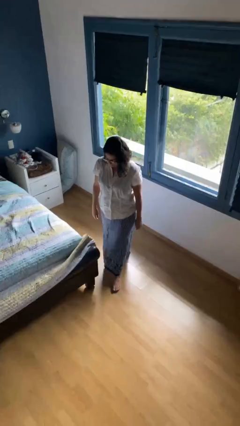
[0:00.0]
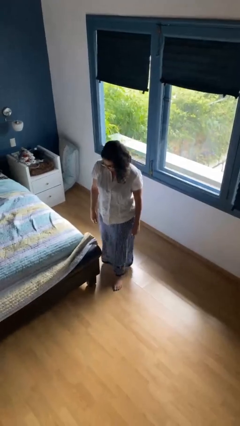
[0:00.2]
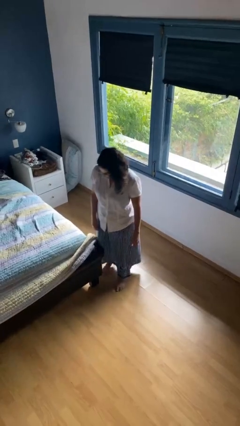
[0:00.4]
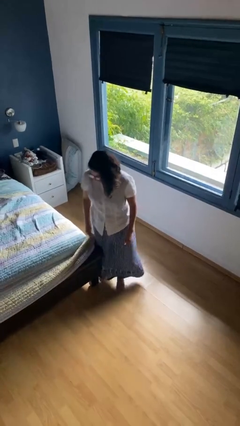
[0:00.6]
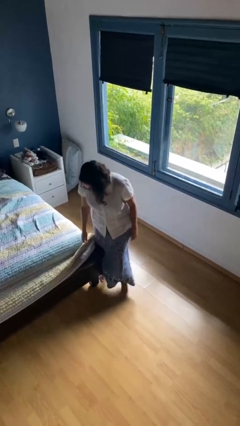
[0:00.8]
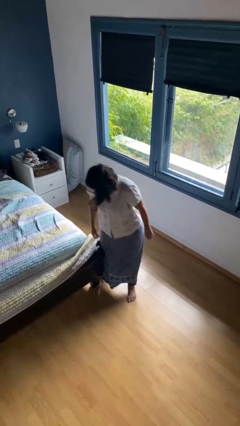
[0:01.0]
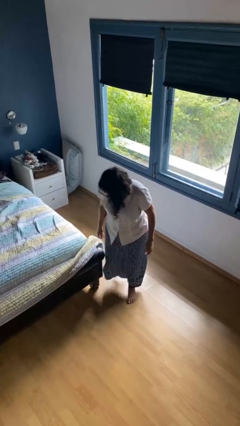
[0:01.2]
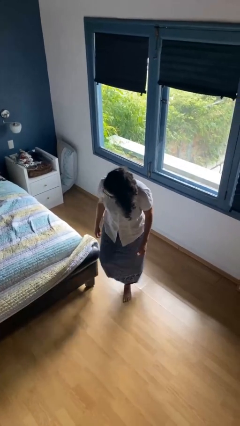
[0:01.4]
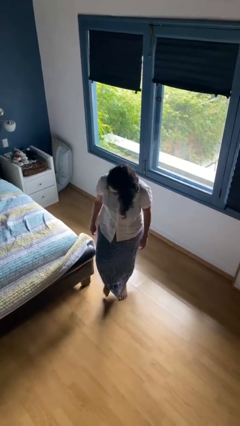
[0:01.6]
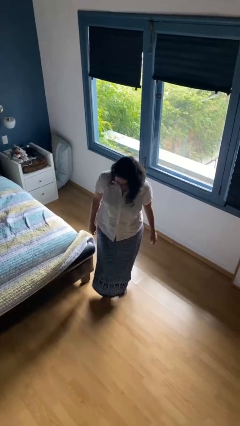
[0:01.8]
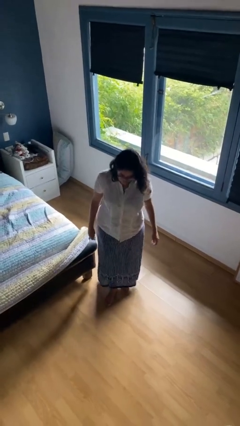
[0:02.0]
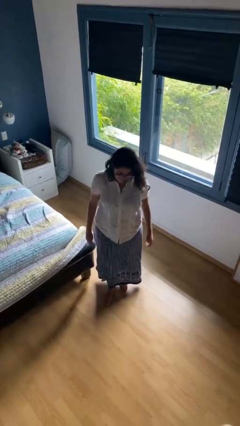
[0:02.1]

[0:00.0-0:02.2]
person stubs toe

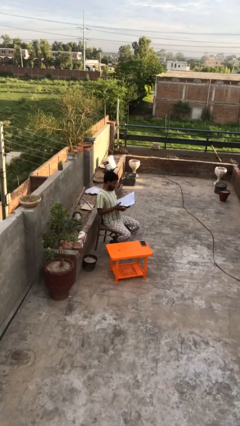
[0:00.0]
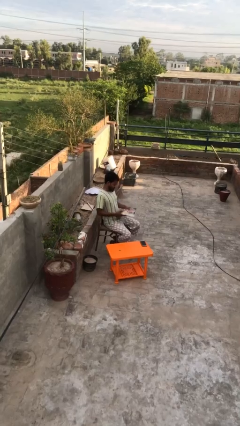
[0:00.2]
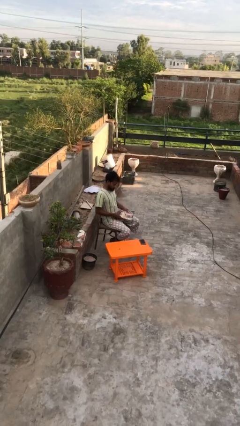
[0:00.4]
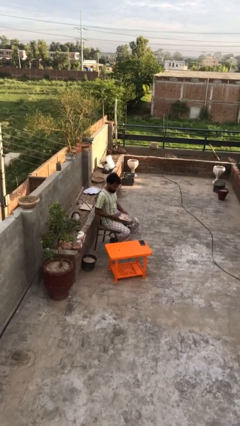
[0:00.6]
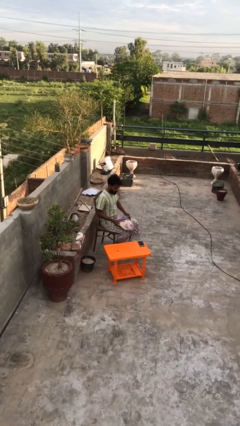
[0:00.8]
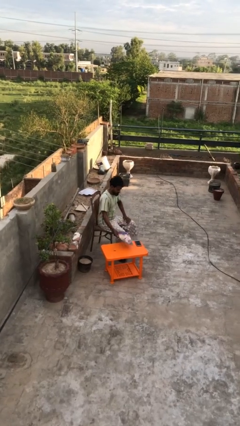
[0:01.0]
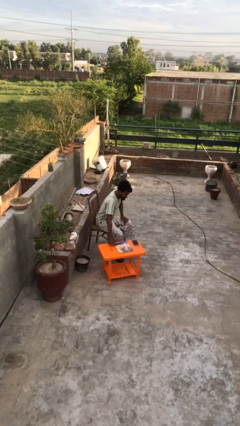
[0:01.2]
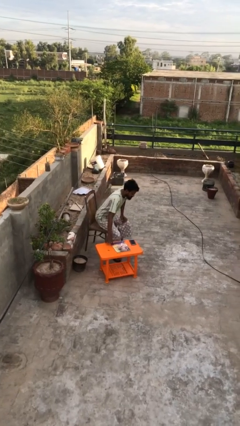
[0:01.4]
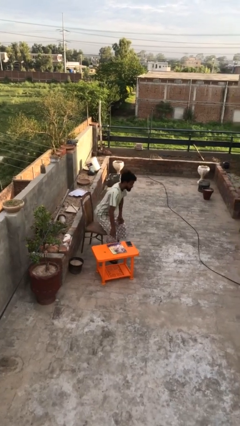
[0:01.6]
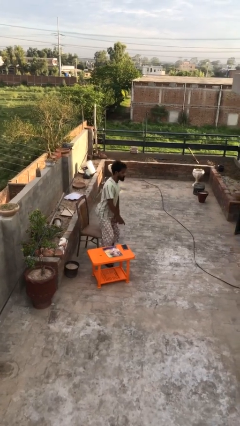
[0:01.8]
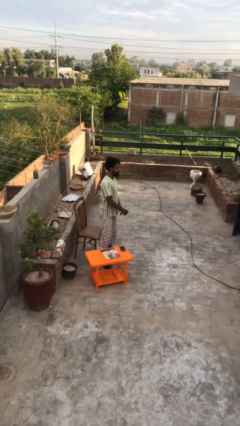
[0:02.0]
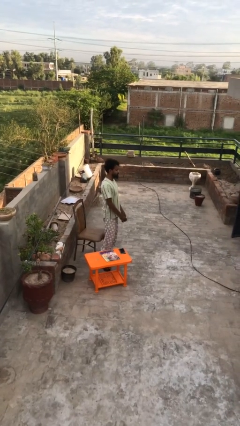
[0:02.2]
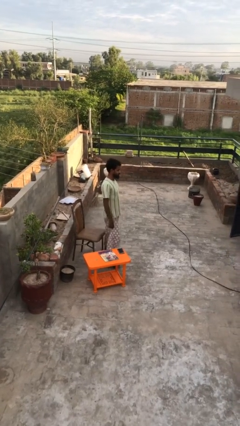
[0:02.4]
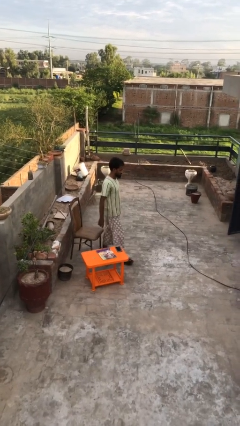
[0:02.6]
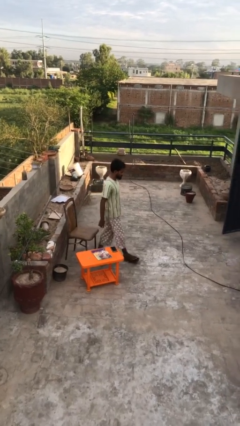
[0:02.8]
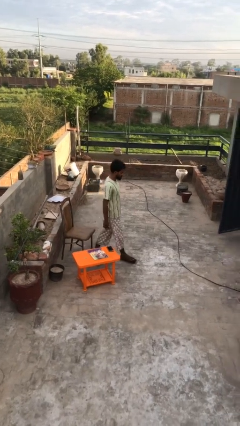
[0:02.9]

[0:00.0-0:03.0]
person stands up

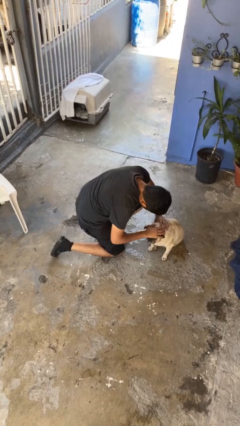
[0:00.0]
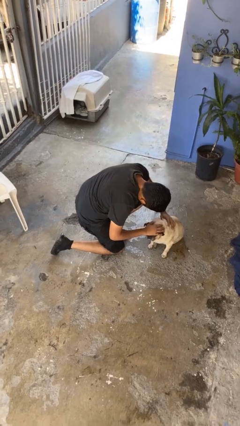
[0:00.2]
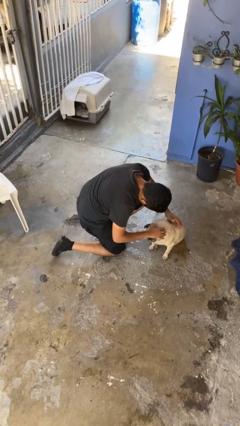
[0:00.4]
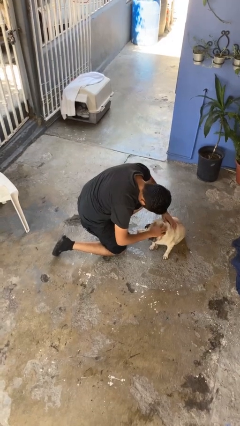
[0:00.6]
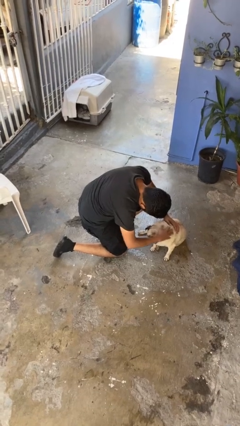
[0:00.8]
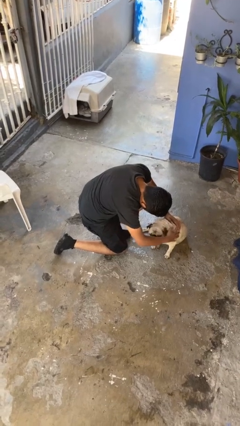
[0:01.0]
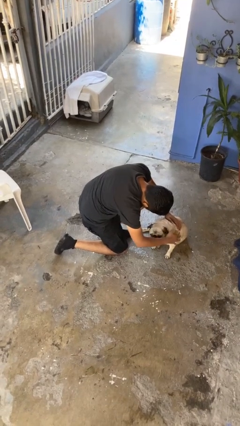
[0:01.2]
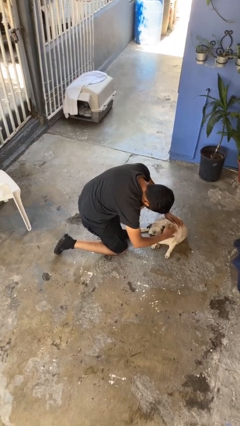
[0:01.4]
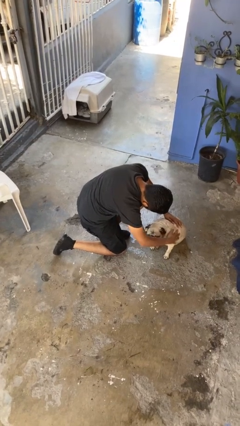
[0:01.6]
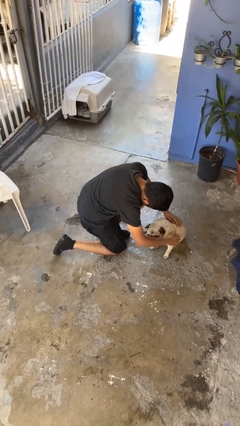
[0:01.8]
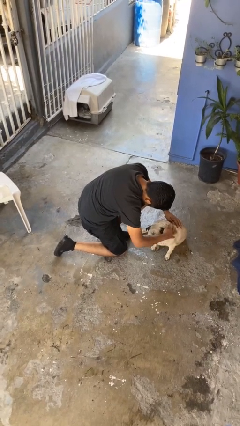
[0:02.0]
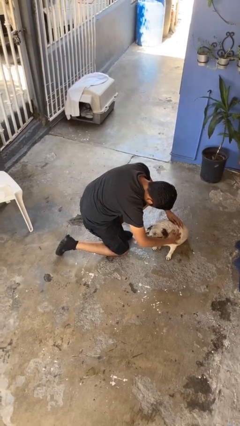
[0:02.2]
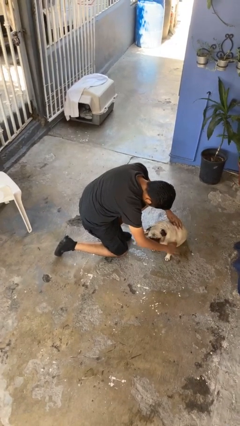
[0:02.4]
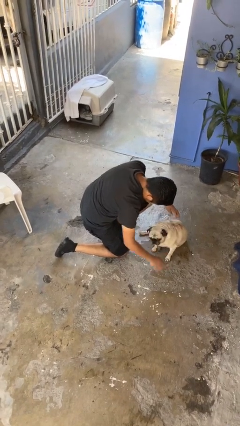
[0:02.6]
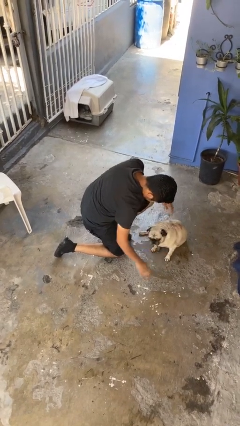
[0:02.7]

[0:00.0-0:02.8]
person pets dog

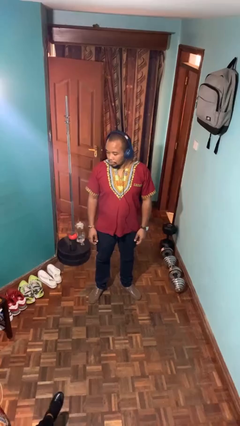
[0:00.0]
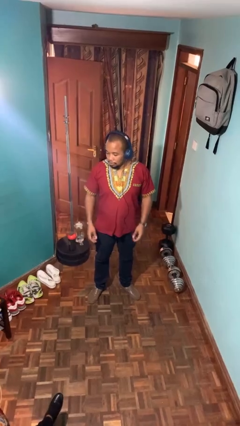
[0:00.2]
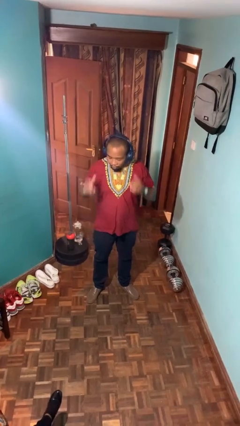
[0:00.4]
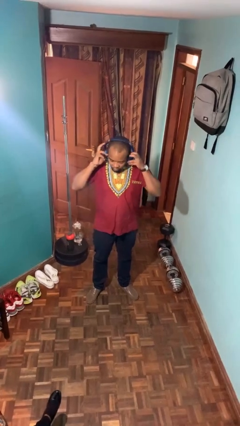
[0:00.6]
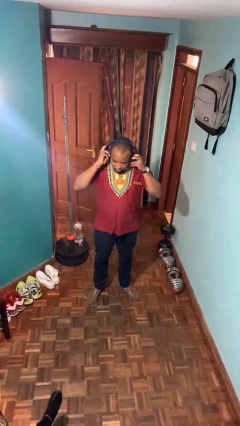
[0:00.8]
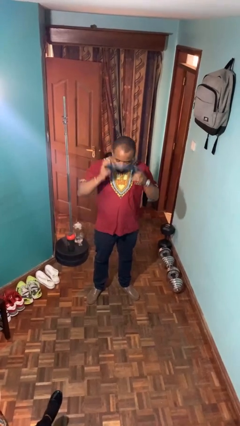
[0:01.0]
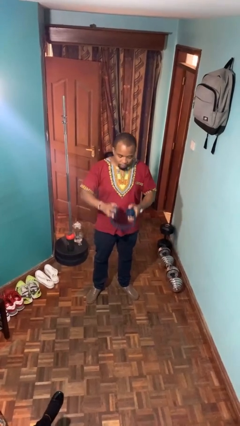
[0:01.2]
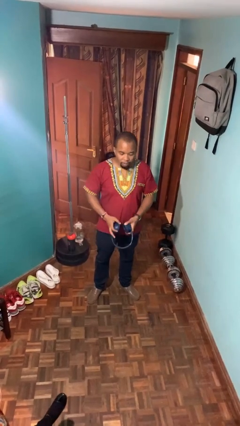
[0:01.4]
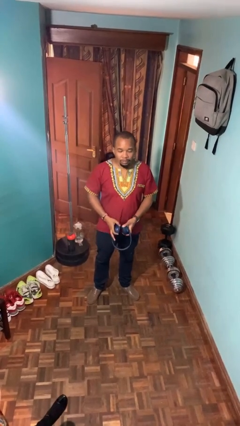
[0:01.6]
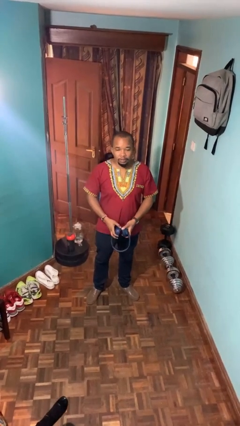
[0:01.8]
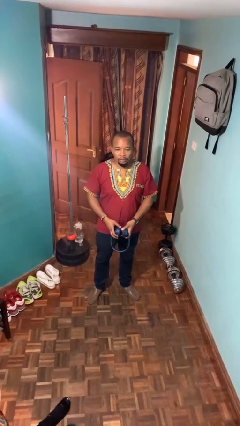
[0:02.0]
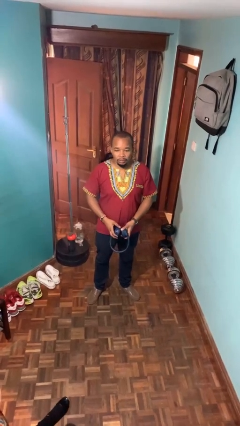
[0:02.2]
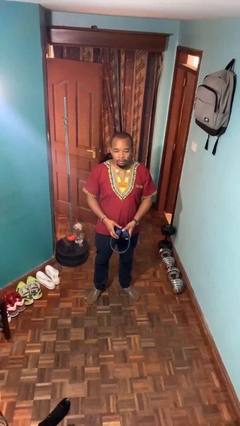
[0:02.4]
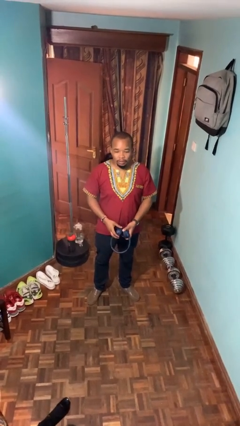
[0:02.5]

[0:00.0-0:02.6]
person takes off headphones

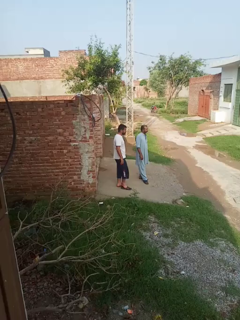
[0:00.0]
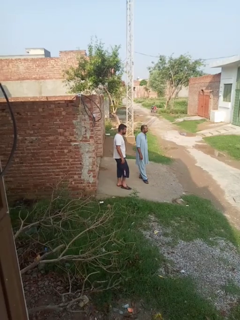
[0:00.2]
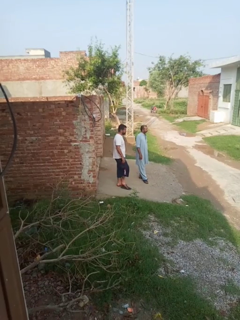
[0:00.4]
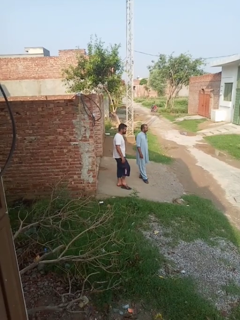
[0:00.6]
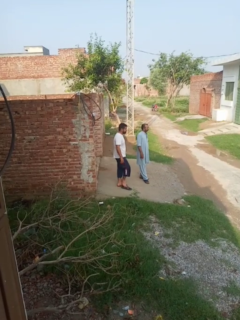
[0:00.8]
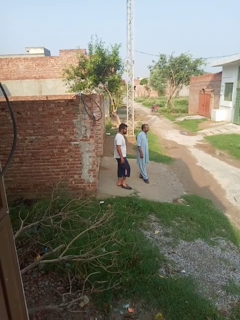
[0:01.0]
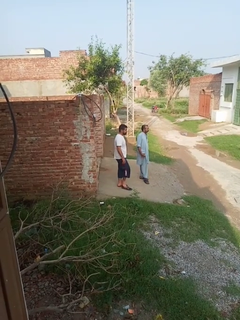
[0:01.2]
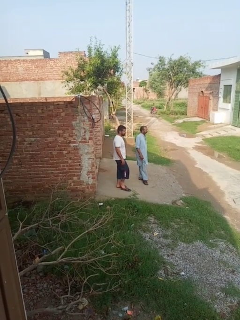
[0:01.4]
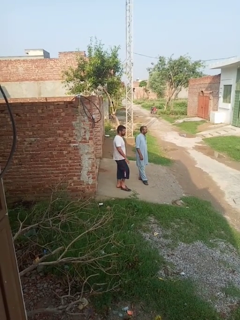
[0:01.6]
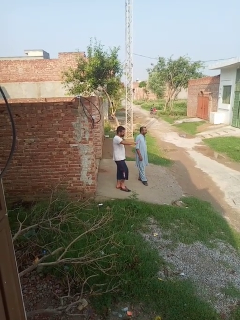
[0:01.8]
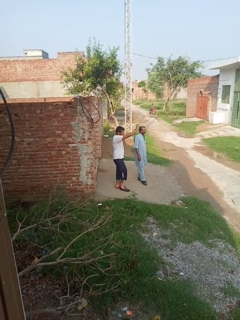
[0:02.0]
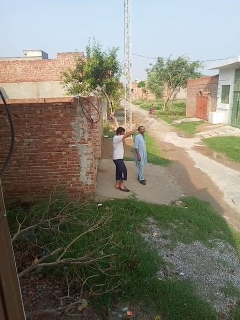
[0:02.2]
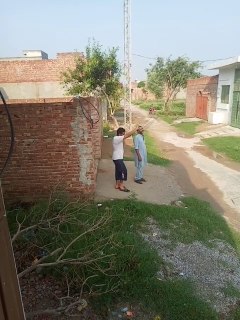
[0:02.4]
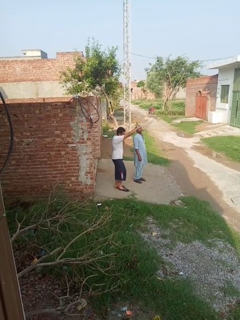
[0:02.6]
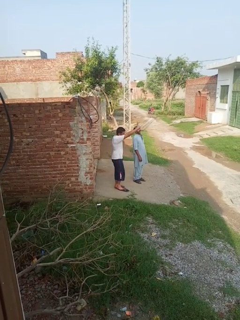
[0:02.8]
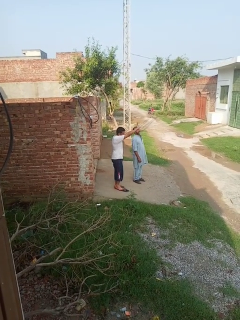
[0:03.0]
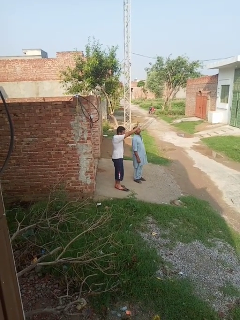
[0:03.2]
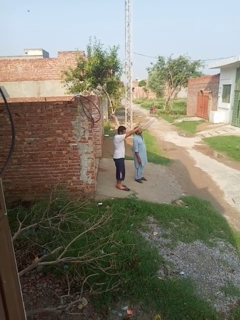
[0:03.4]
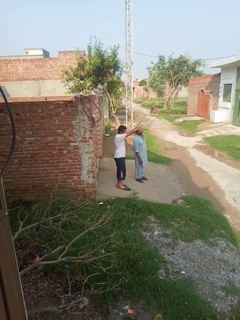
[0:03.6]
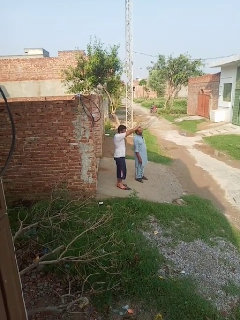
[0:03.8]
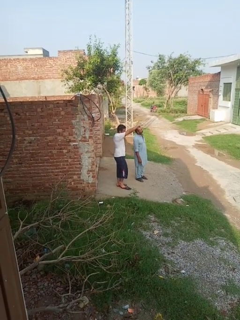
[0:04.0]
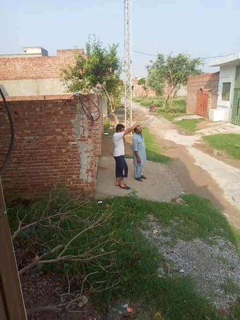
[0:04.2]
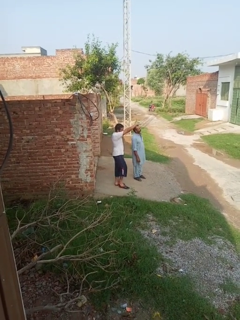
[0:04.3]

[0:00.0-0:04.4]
person waves at person

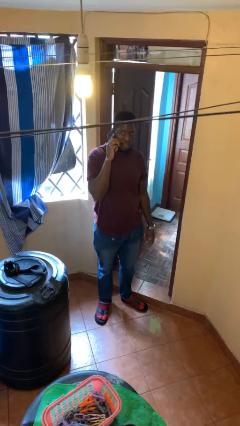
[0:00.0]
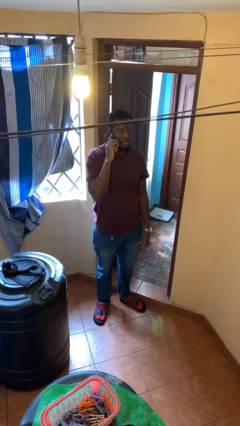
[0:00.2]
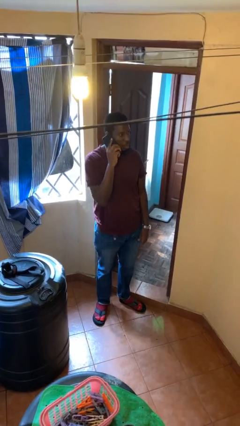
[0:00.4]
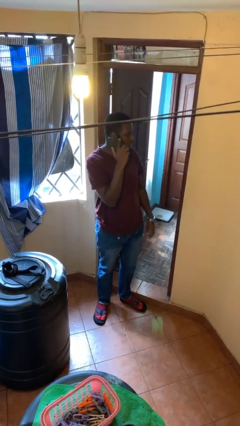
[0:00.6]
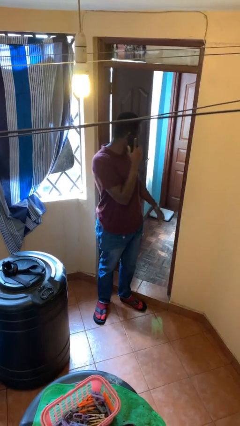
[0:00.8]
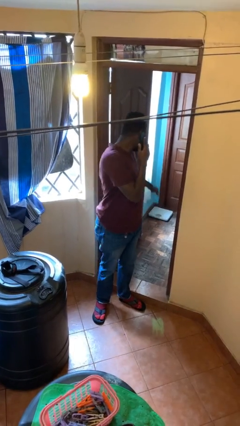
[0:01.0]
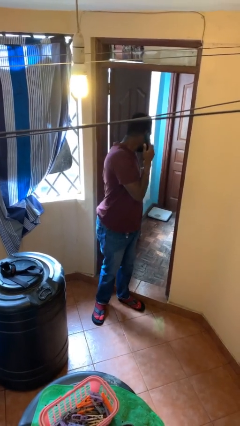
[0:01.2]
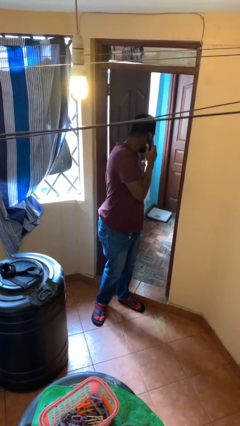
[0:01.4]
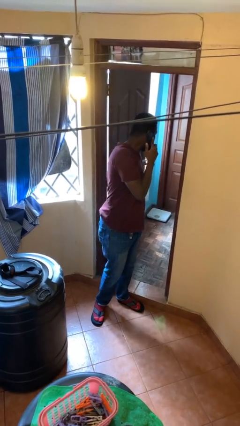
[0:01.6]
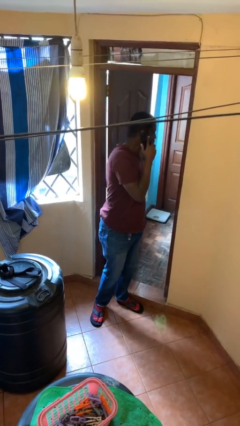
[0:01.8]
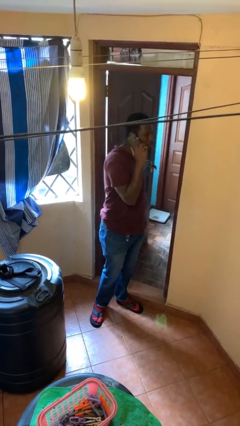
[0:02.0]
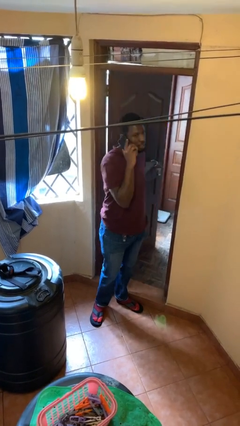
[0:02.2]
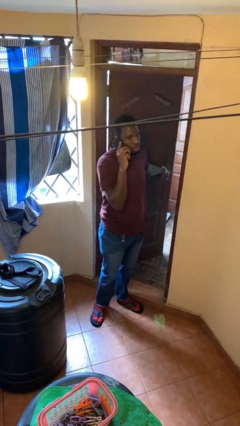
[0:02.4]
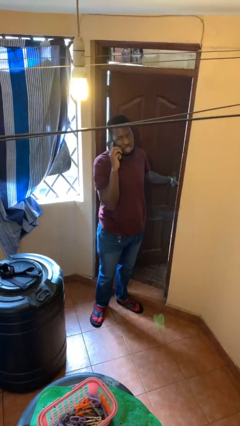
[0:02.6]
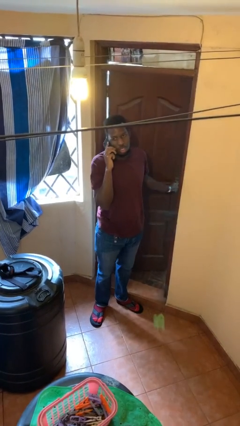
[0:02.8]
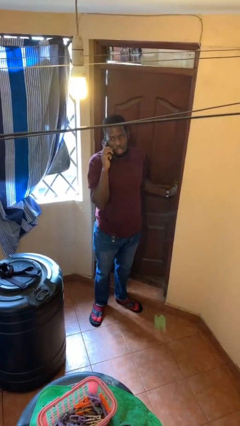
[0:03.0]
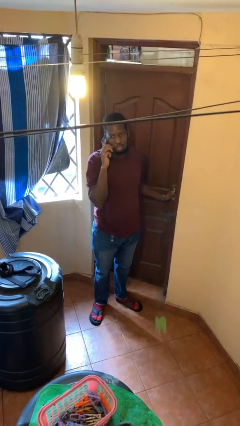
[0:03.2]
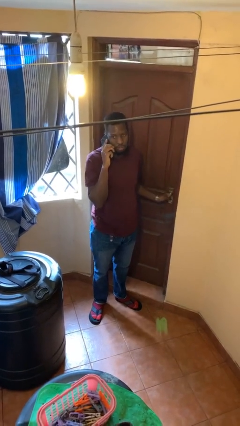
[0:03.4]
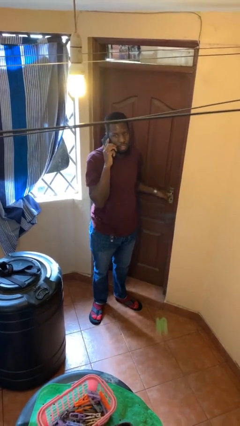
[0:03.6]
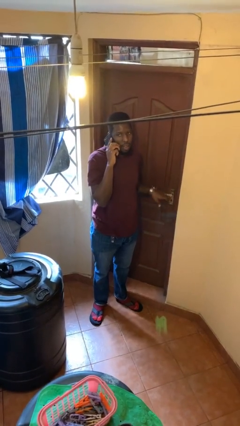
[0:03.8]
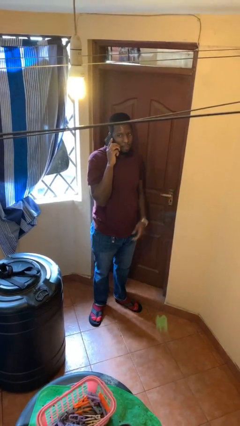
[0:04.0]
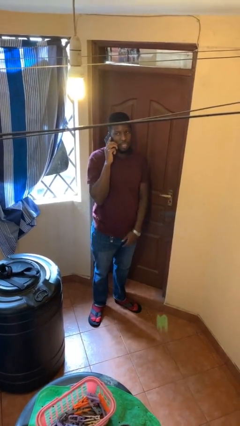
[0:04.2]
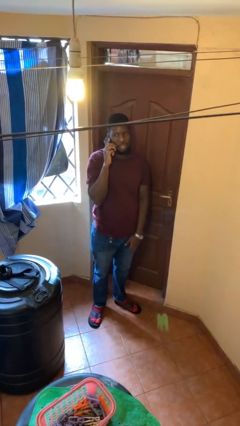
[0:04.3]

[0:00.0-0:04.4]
person closes facility door
